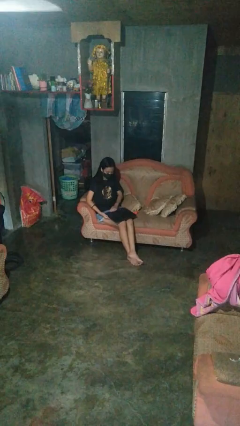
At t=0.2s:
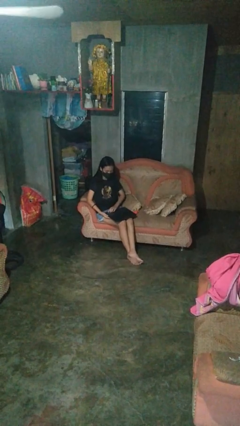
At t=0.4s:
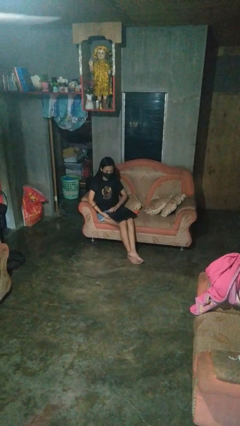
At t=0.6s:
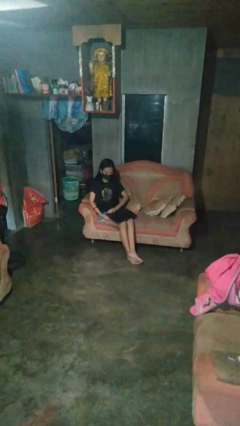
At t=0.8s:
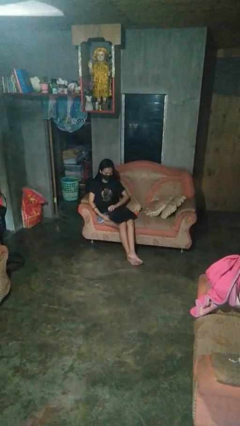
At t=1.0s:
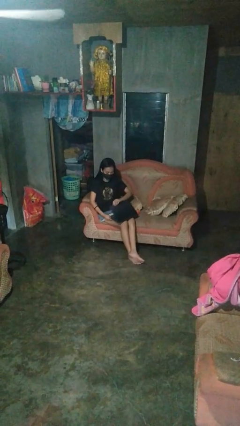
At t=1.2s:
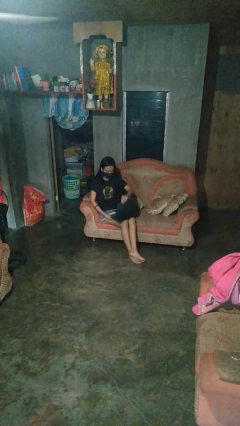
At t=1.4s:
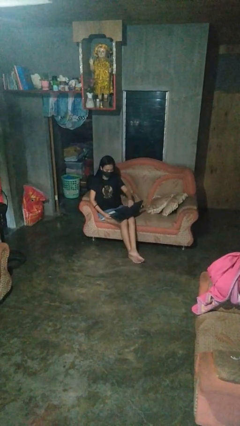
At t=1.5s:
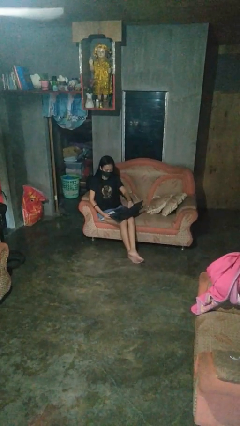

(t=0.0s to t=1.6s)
person opens laptop

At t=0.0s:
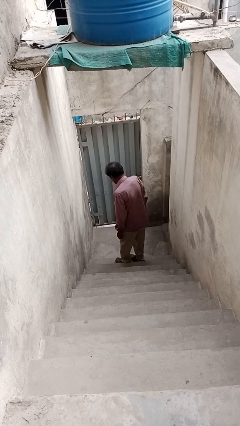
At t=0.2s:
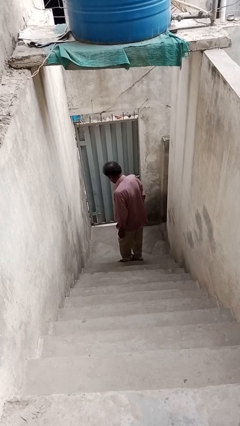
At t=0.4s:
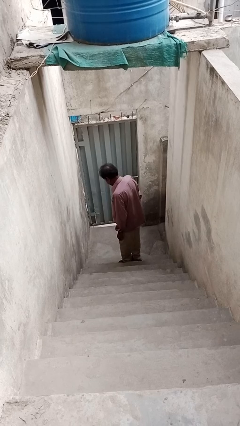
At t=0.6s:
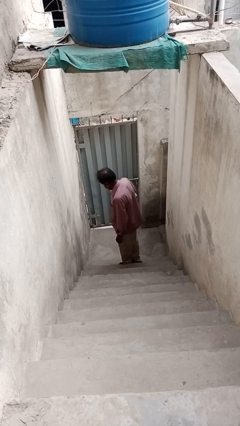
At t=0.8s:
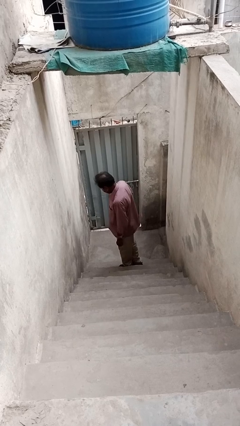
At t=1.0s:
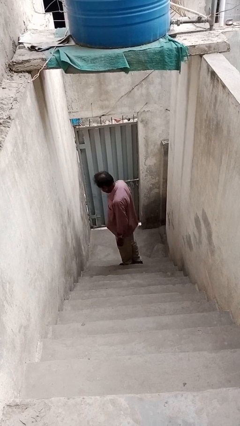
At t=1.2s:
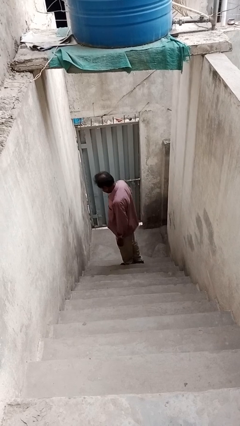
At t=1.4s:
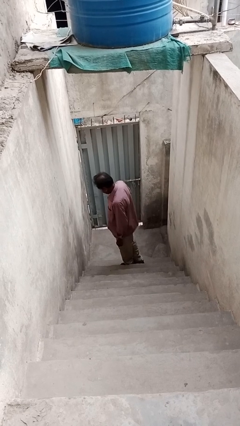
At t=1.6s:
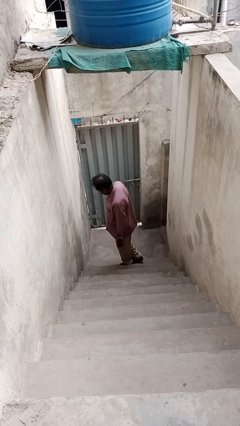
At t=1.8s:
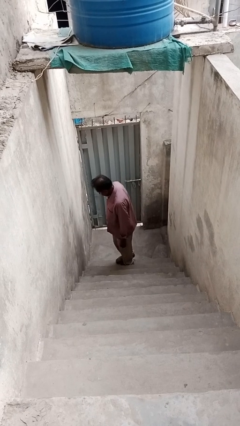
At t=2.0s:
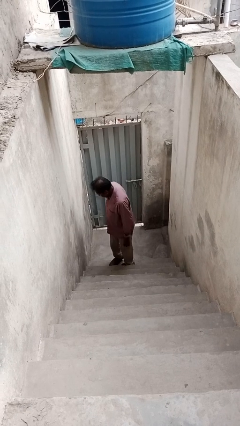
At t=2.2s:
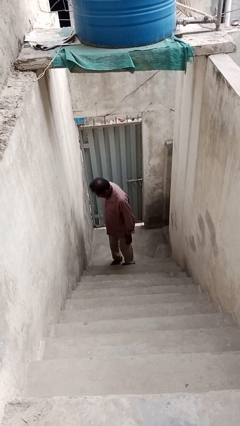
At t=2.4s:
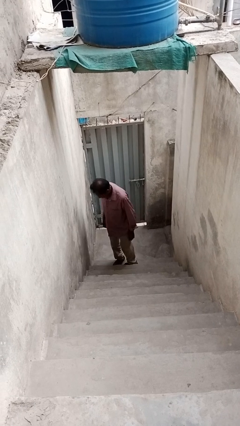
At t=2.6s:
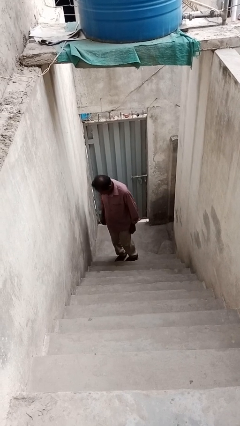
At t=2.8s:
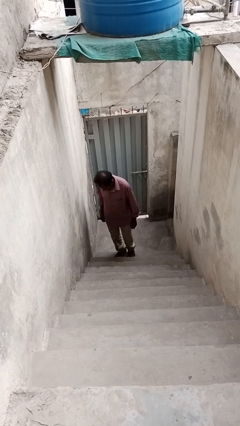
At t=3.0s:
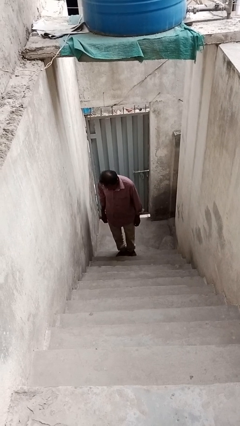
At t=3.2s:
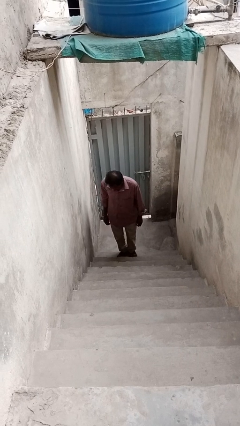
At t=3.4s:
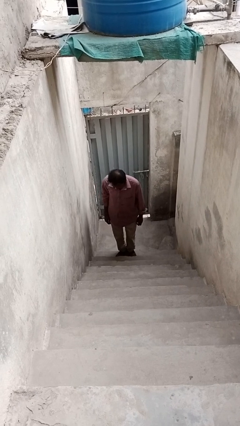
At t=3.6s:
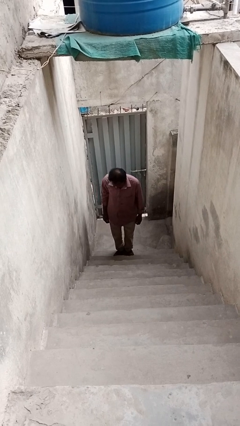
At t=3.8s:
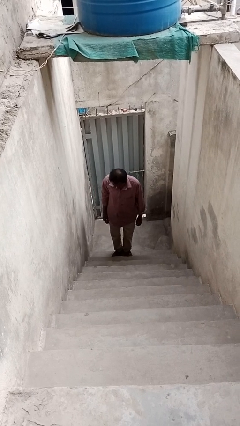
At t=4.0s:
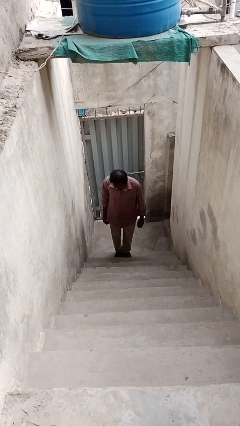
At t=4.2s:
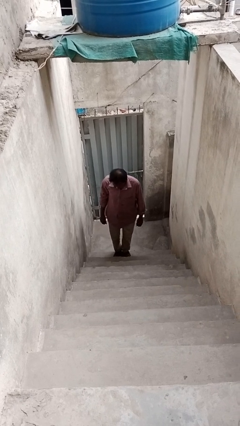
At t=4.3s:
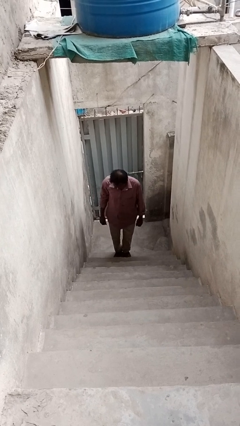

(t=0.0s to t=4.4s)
person trips on stair

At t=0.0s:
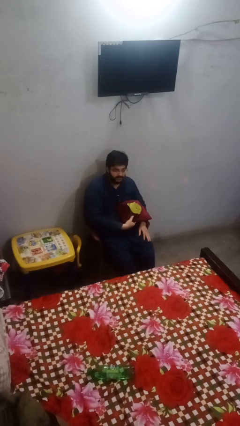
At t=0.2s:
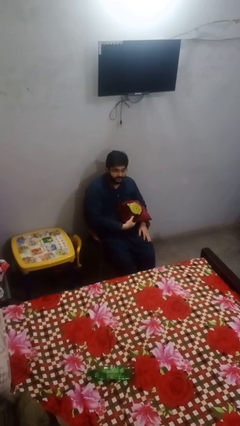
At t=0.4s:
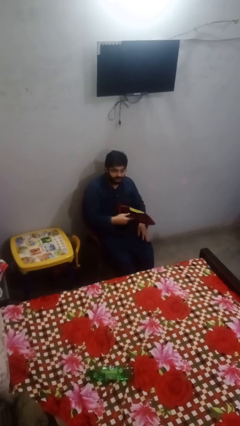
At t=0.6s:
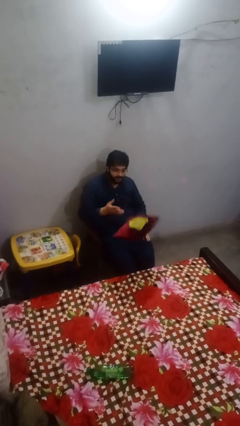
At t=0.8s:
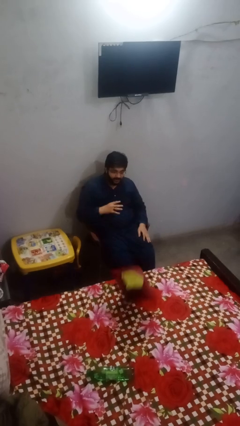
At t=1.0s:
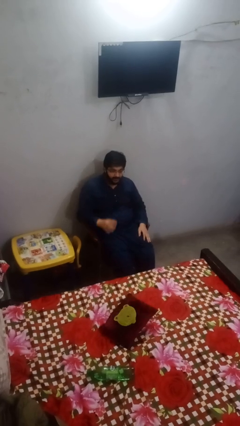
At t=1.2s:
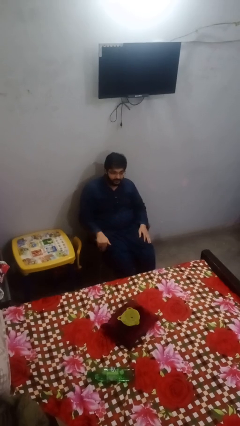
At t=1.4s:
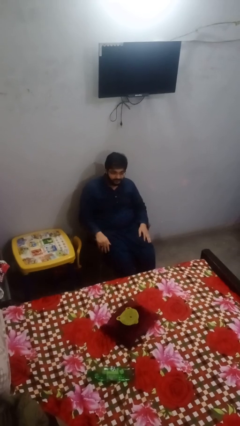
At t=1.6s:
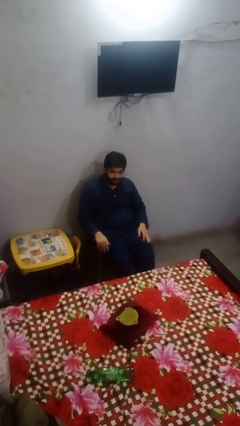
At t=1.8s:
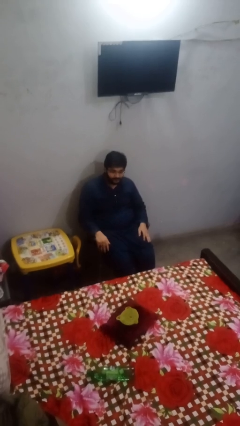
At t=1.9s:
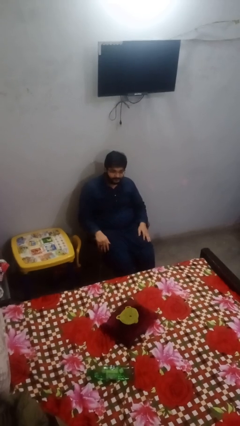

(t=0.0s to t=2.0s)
person throws object on bed

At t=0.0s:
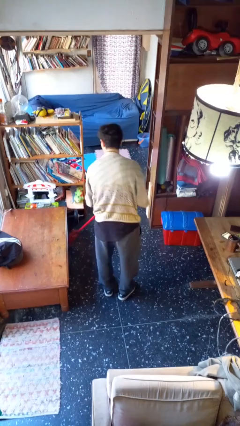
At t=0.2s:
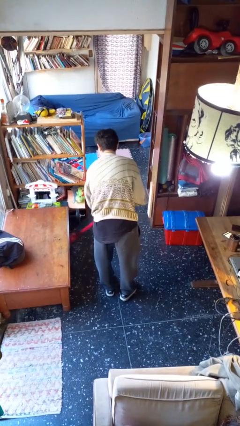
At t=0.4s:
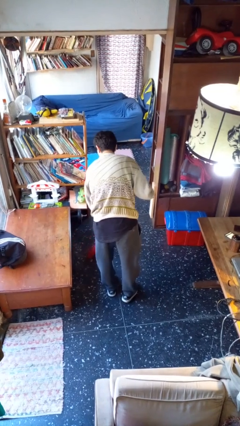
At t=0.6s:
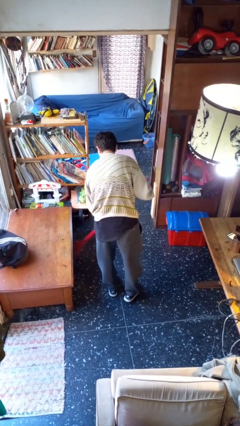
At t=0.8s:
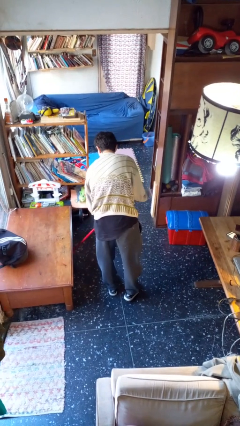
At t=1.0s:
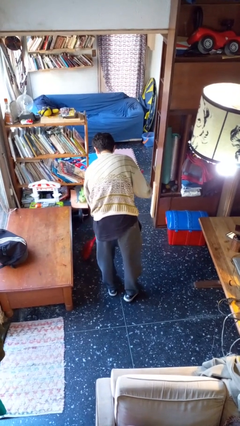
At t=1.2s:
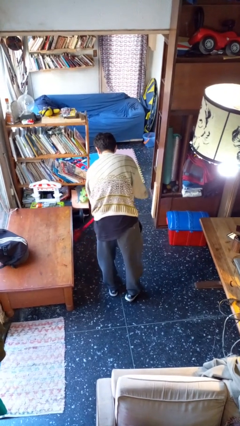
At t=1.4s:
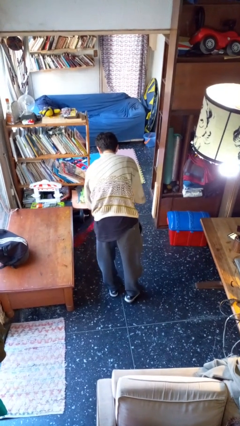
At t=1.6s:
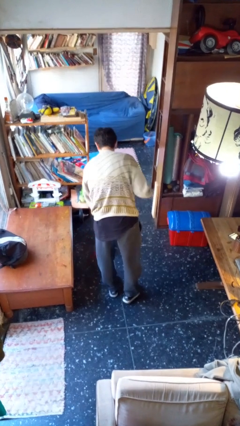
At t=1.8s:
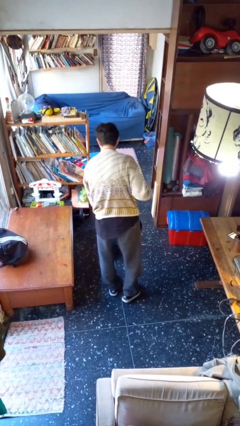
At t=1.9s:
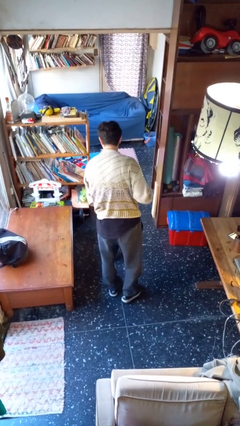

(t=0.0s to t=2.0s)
person sweeps floor

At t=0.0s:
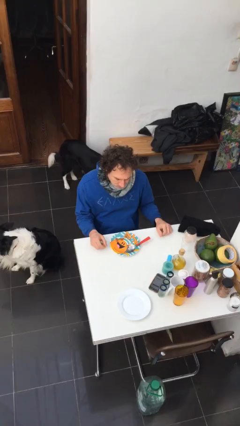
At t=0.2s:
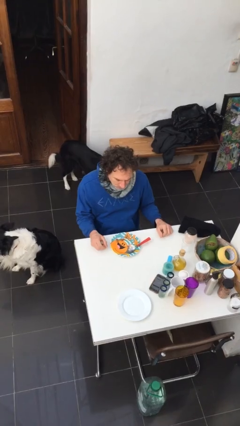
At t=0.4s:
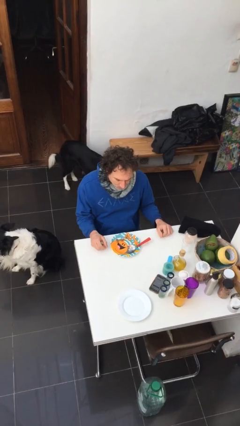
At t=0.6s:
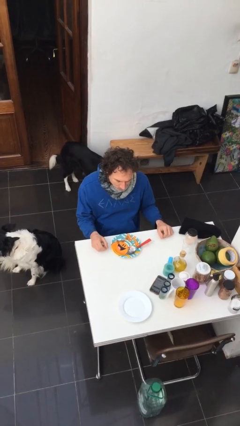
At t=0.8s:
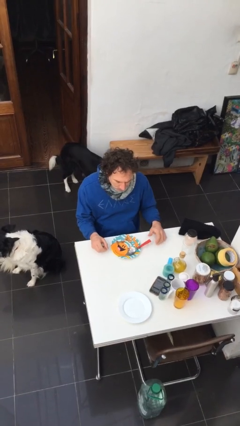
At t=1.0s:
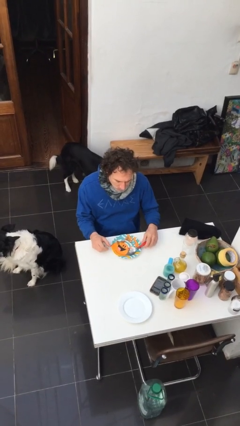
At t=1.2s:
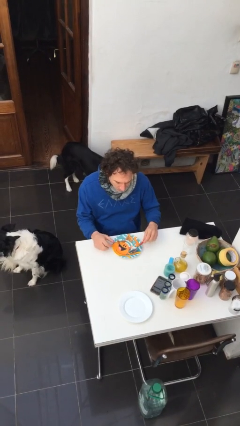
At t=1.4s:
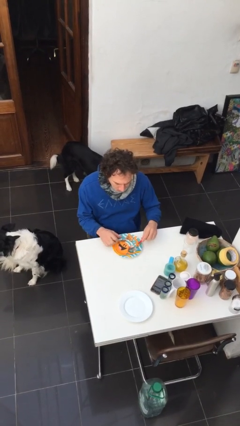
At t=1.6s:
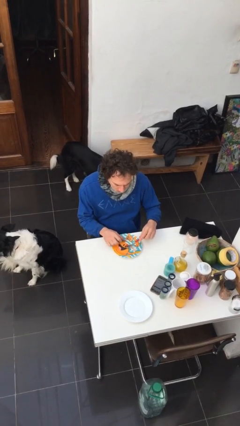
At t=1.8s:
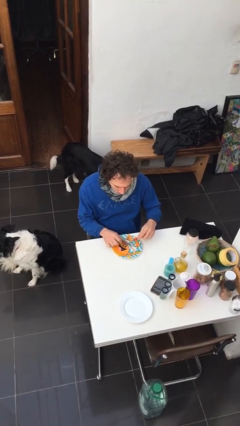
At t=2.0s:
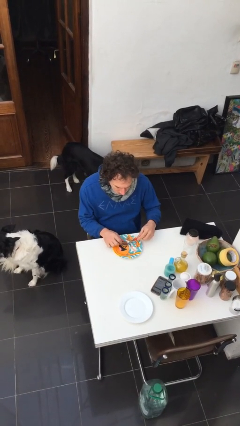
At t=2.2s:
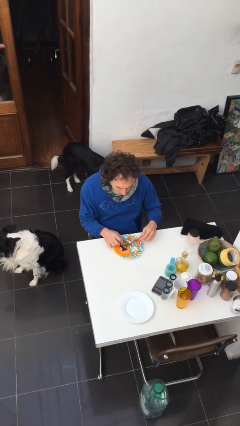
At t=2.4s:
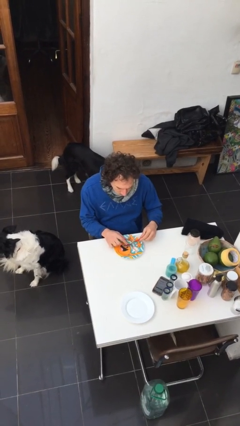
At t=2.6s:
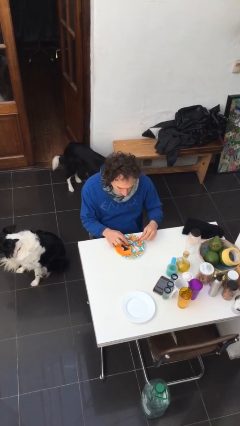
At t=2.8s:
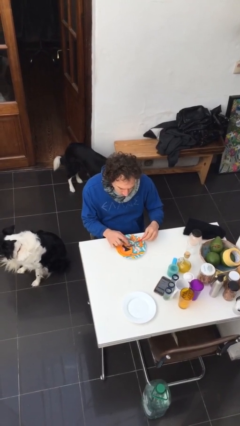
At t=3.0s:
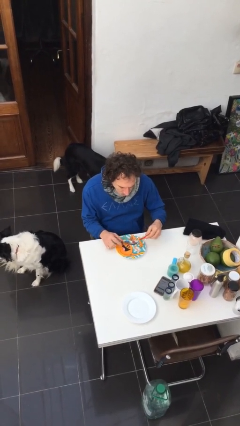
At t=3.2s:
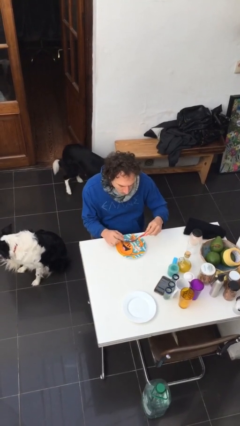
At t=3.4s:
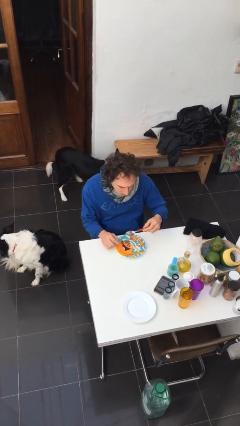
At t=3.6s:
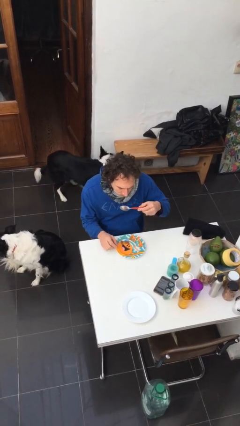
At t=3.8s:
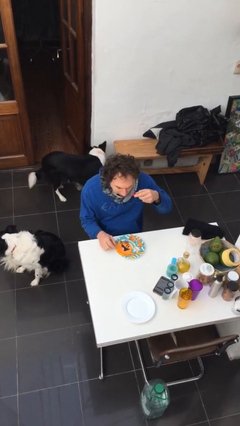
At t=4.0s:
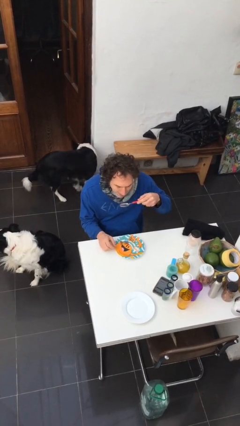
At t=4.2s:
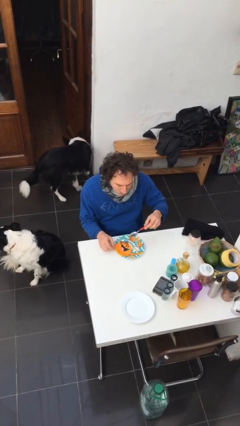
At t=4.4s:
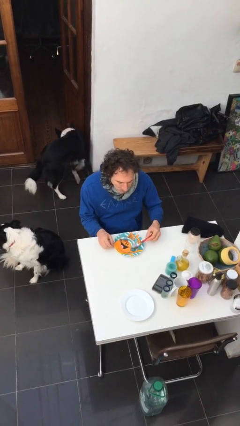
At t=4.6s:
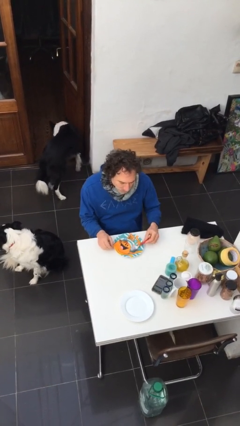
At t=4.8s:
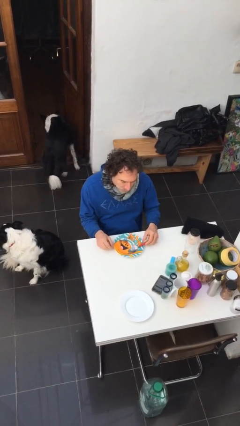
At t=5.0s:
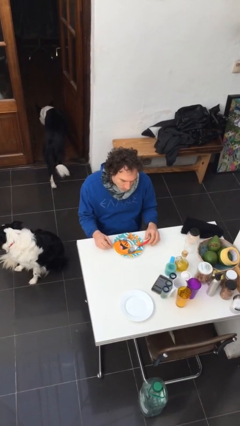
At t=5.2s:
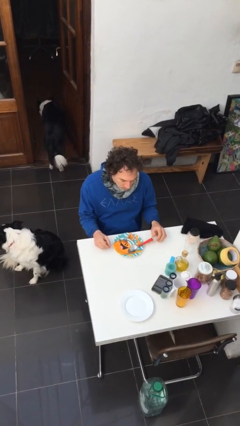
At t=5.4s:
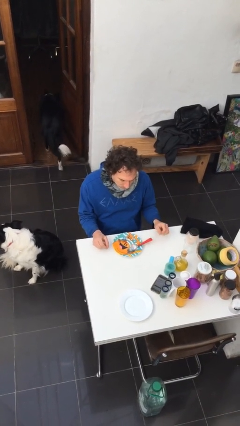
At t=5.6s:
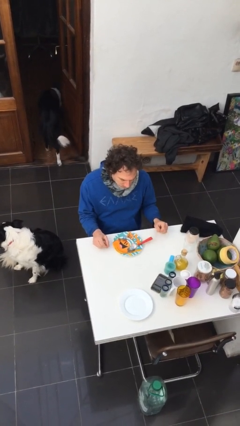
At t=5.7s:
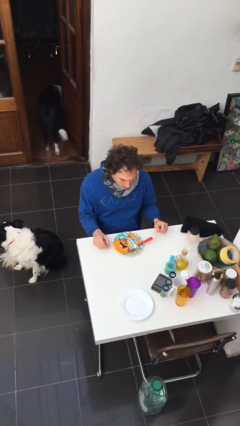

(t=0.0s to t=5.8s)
person eats with utensil

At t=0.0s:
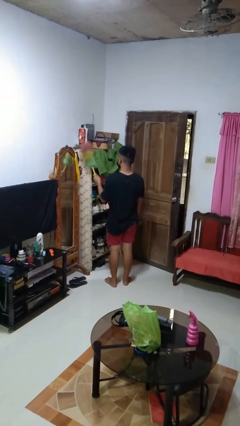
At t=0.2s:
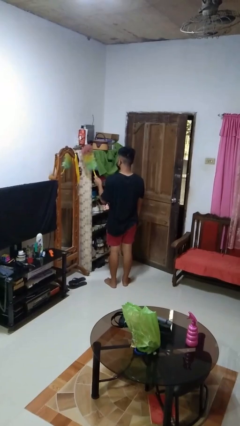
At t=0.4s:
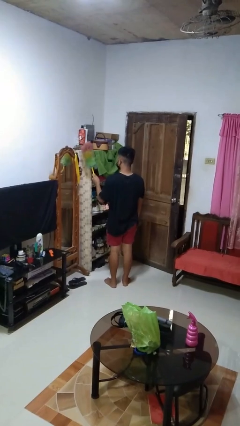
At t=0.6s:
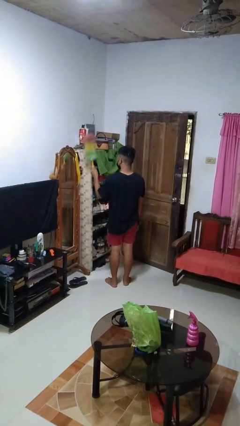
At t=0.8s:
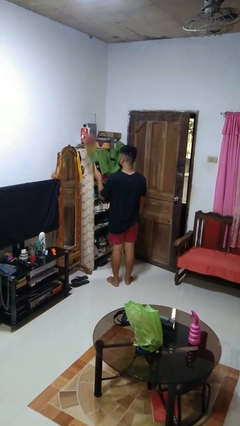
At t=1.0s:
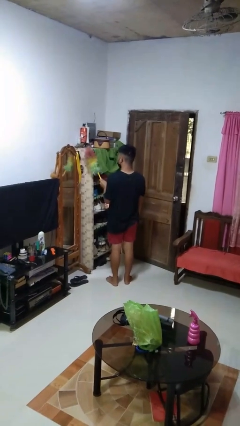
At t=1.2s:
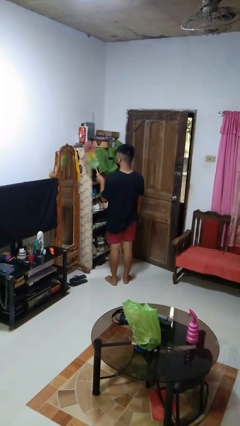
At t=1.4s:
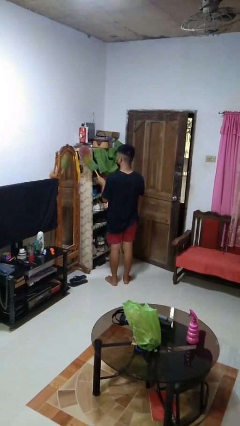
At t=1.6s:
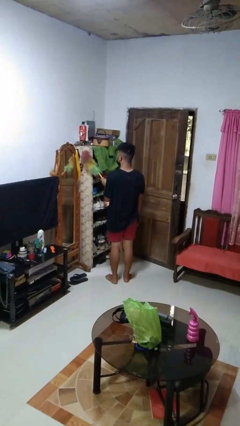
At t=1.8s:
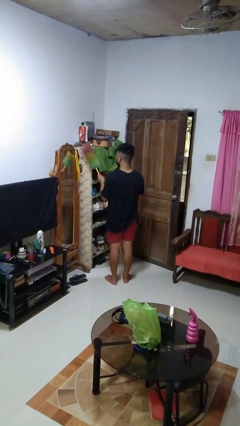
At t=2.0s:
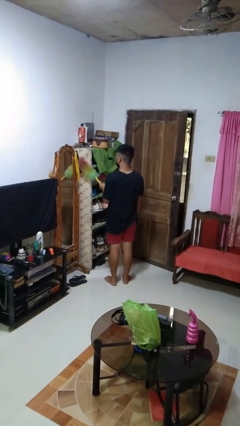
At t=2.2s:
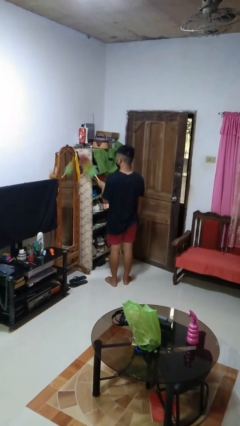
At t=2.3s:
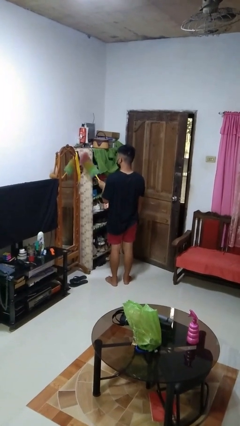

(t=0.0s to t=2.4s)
person dusts furniture
